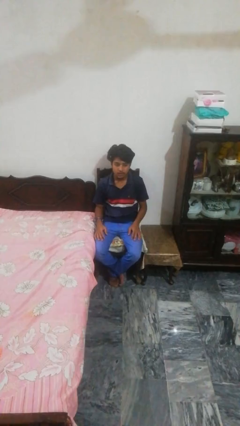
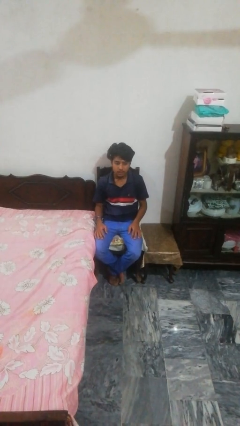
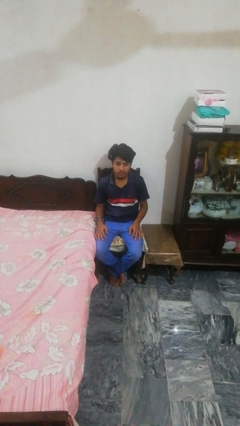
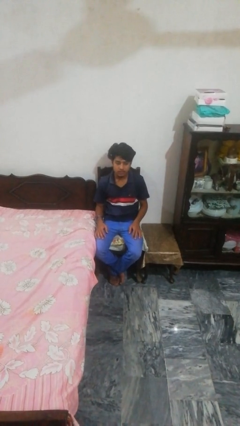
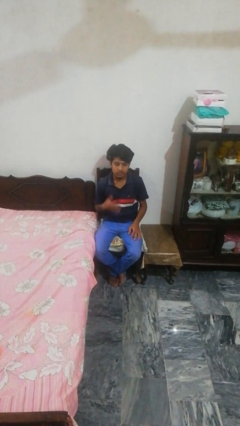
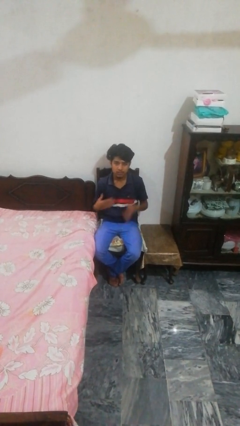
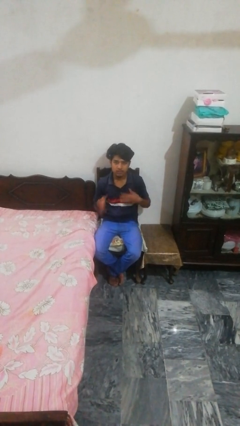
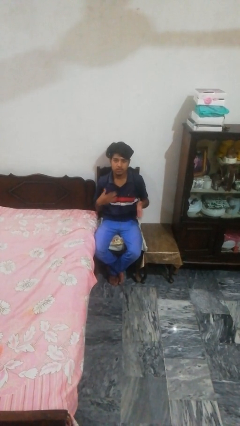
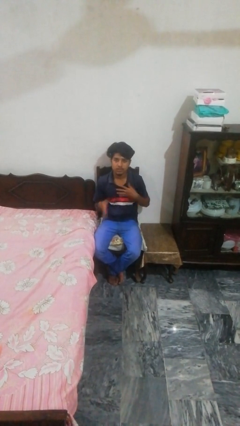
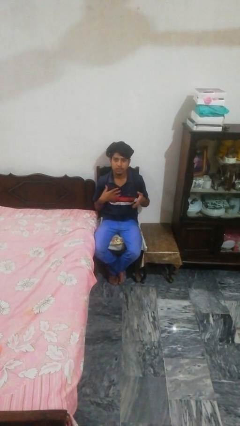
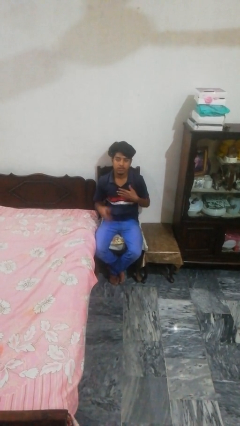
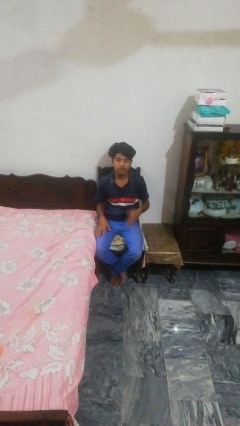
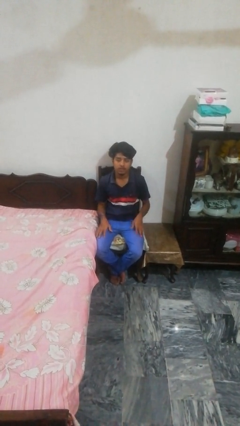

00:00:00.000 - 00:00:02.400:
person drums on chest

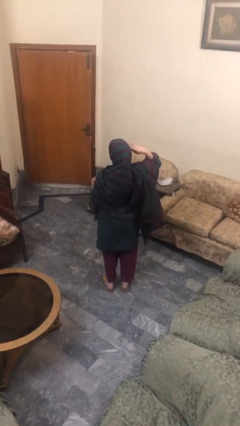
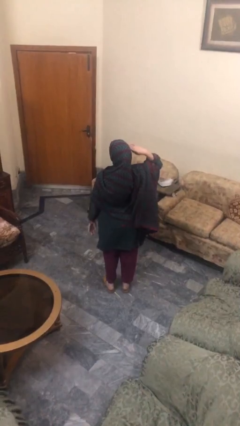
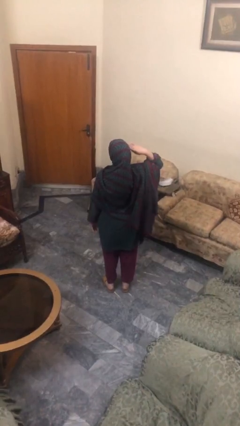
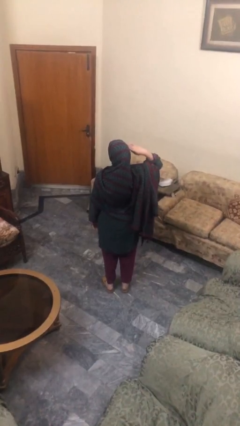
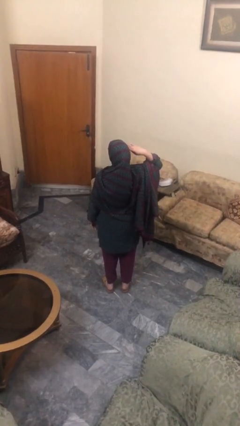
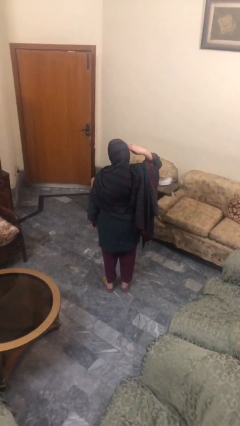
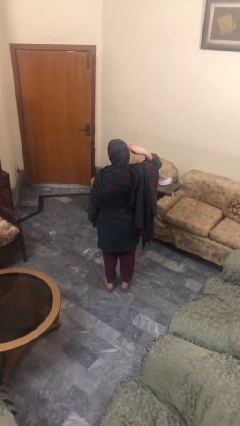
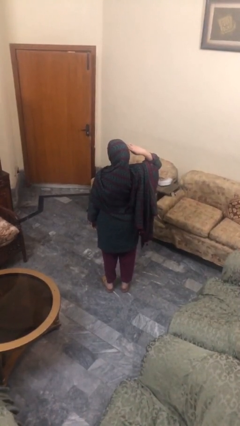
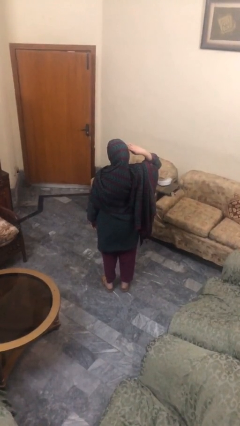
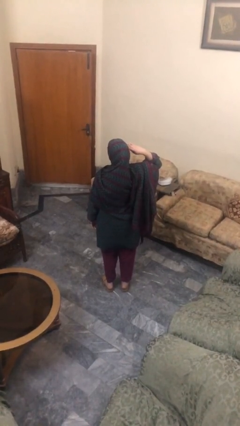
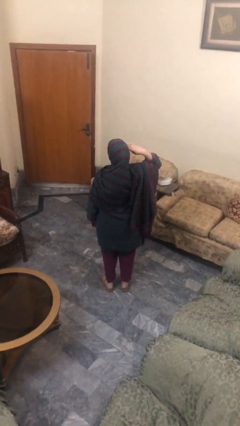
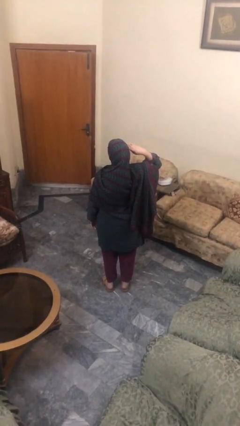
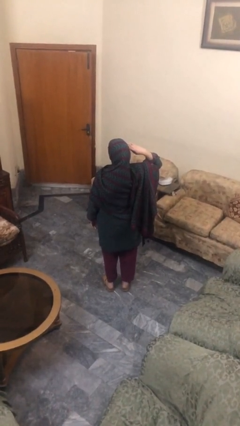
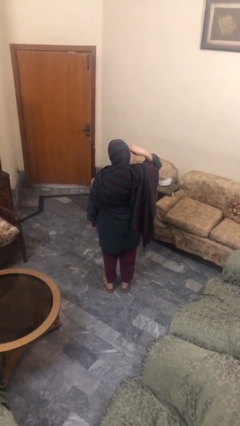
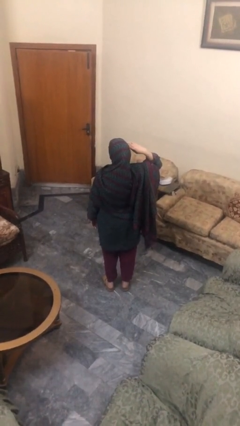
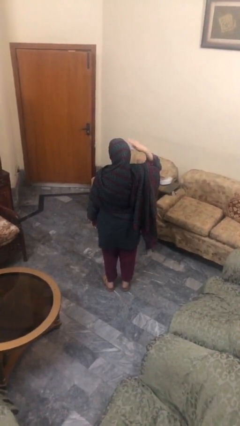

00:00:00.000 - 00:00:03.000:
person salutes

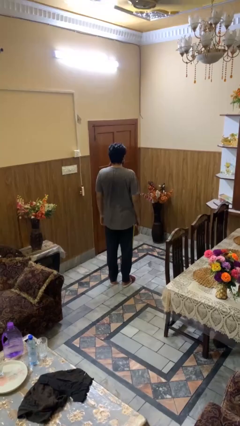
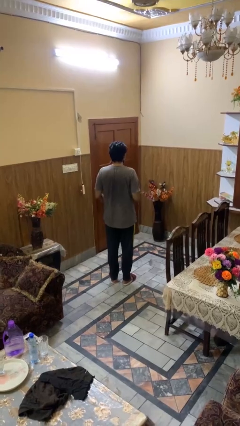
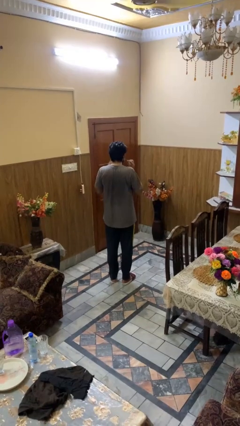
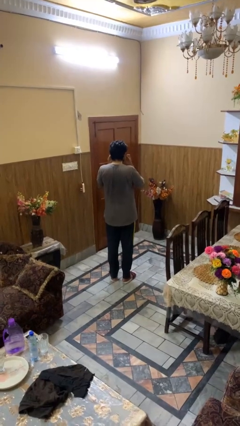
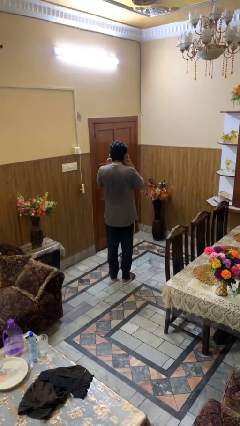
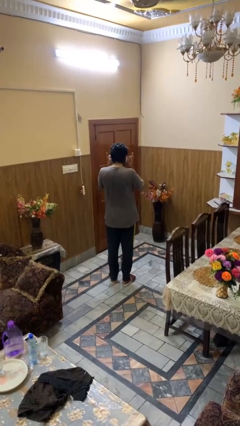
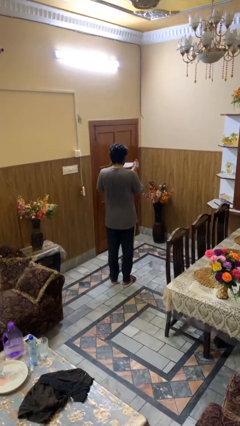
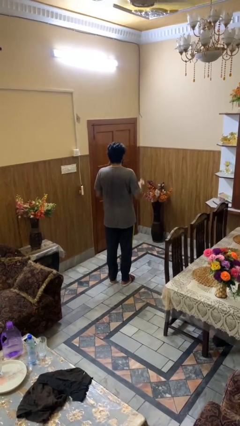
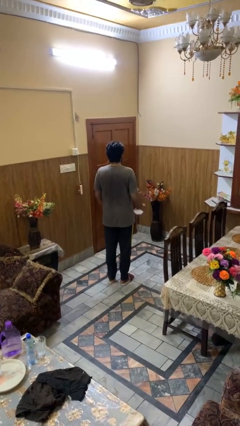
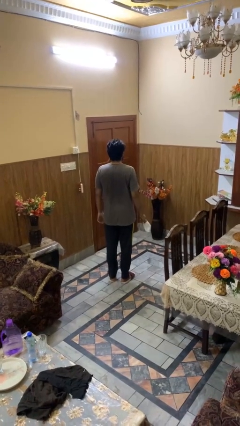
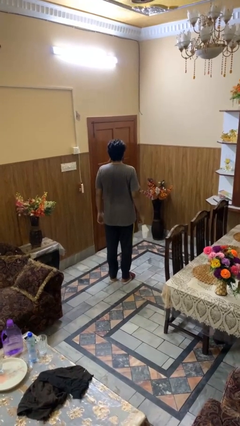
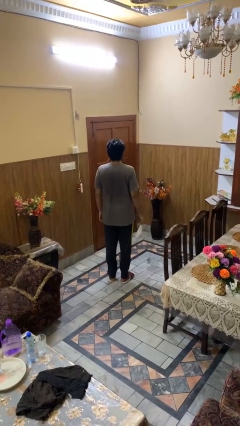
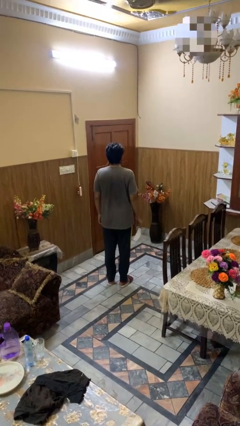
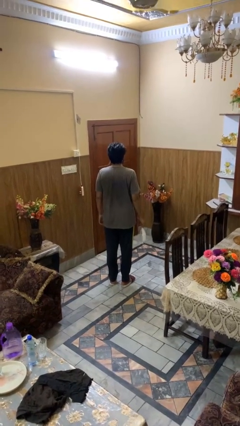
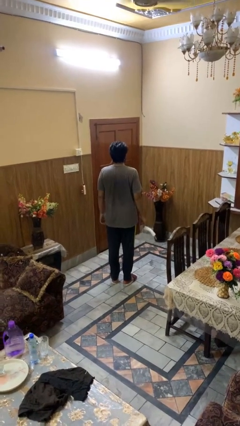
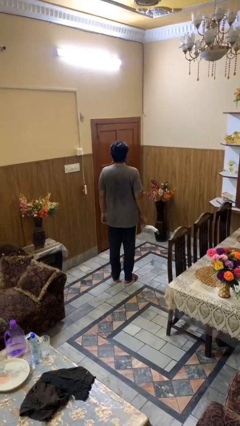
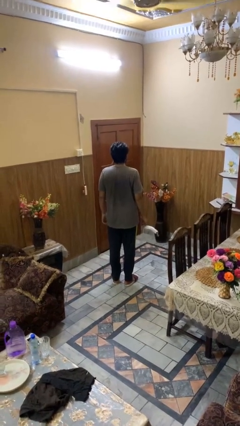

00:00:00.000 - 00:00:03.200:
person takes off facemask

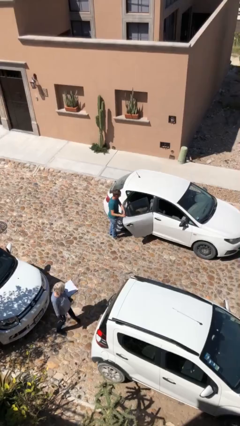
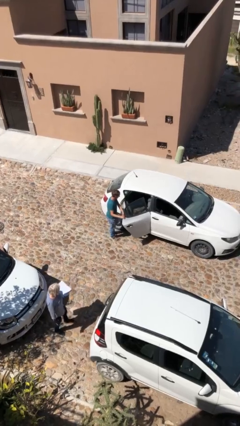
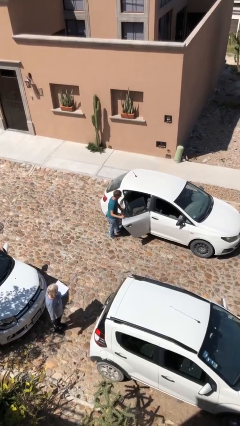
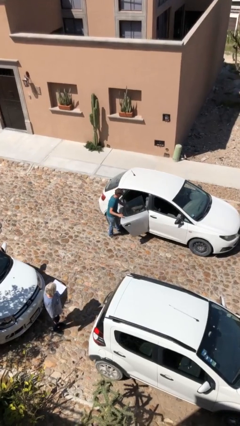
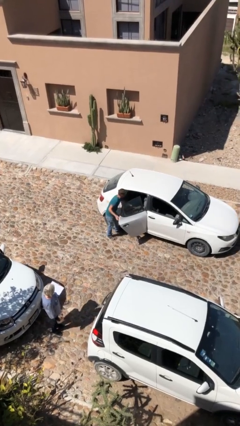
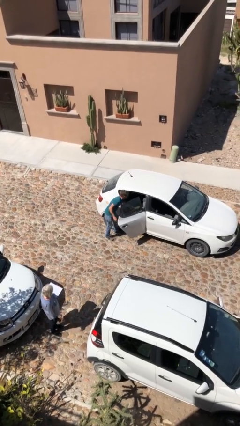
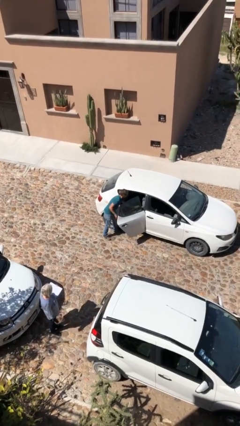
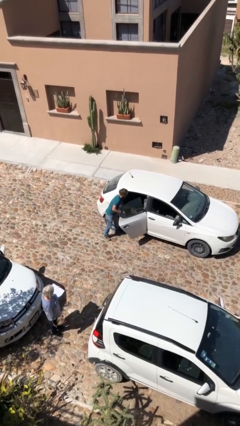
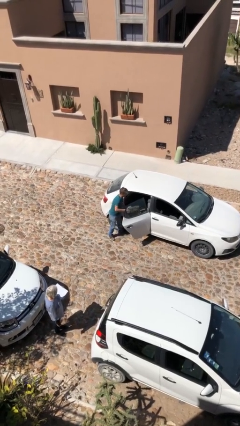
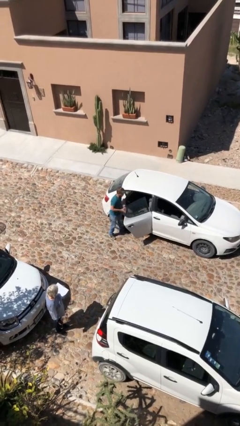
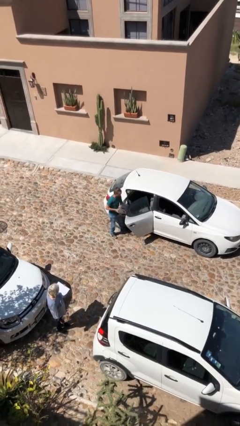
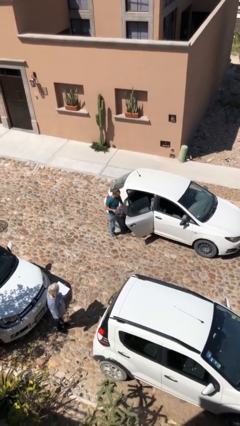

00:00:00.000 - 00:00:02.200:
person unloads car

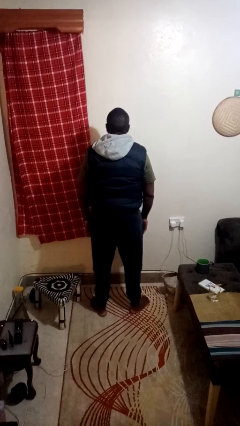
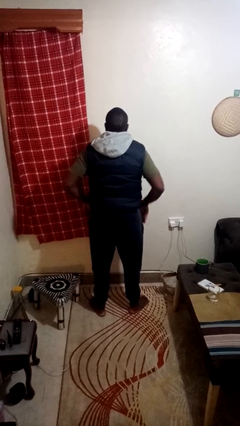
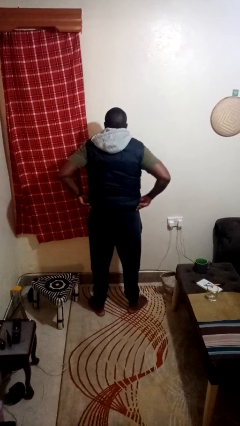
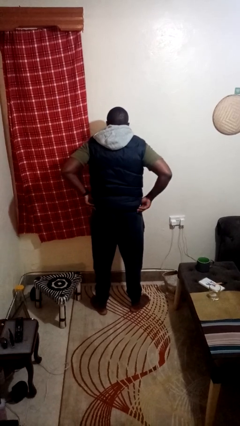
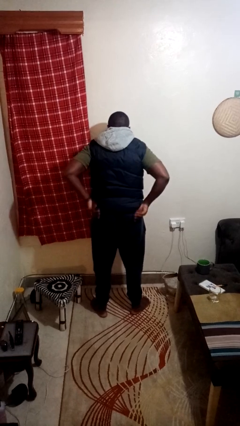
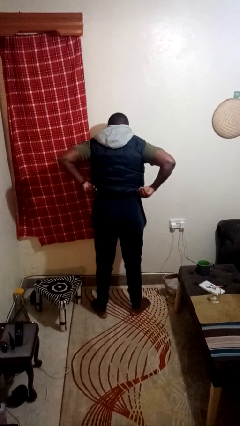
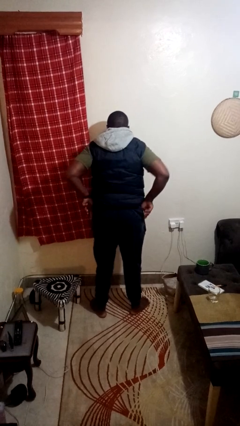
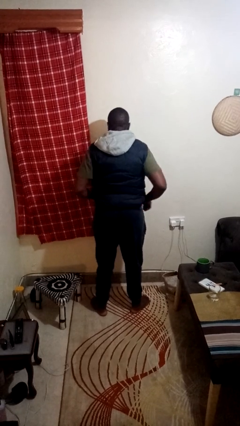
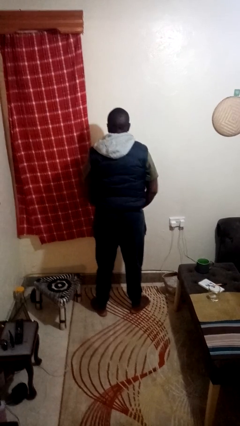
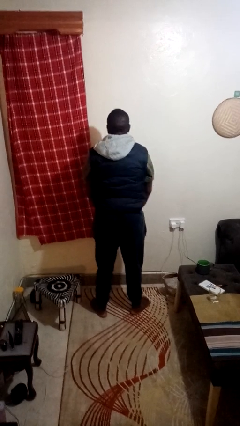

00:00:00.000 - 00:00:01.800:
person hikes up pants

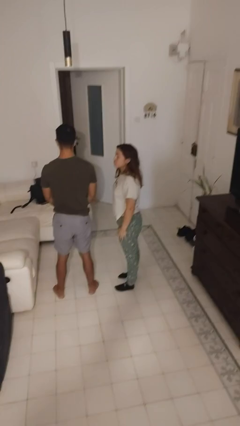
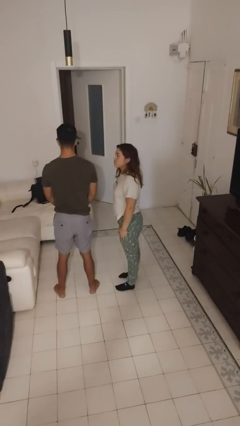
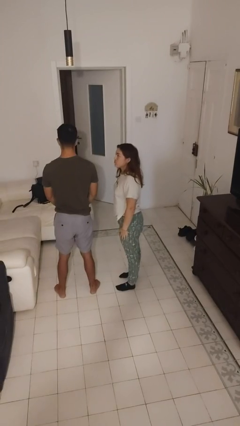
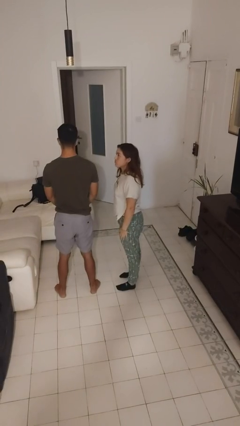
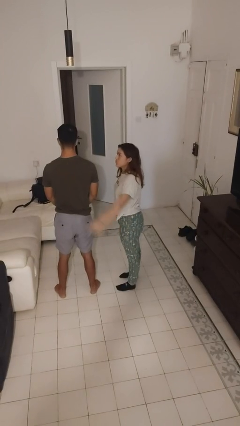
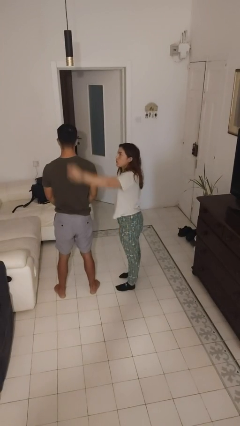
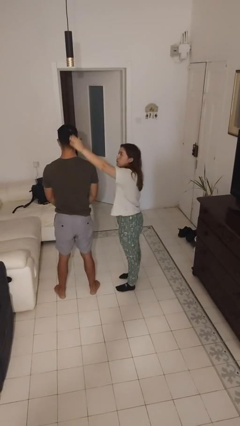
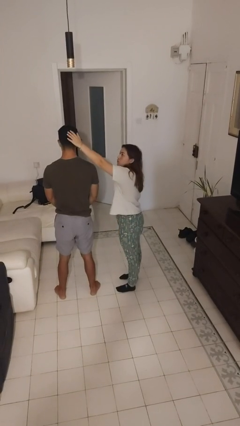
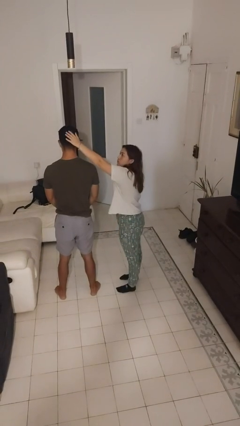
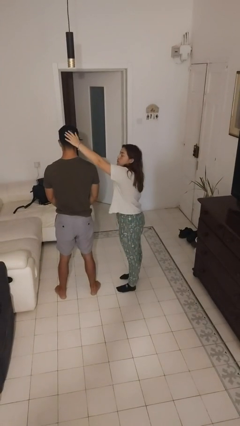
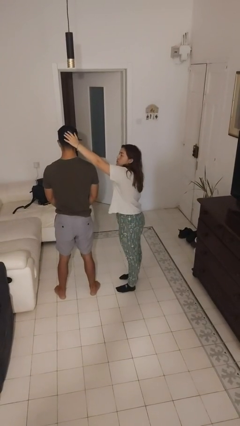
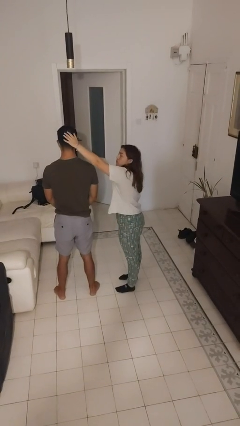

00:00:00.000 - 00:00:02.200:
person grabs person by hair

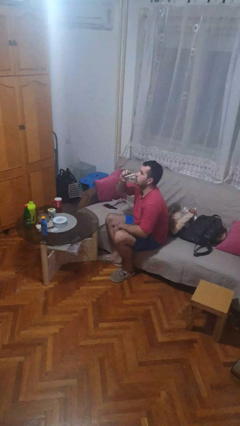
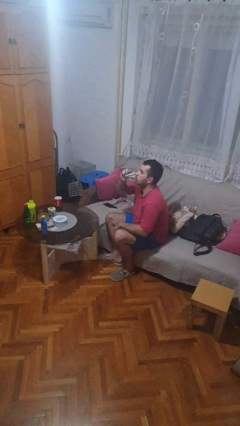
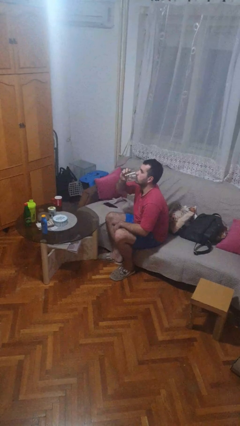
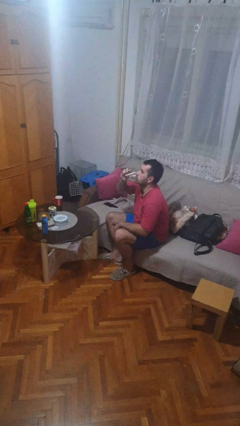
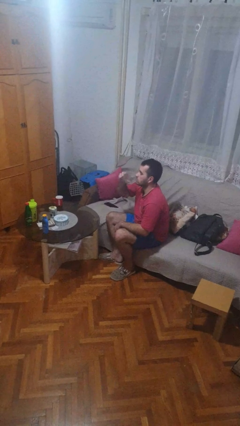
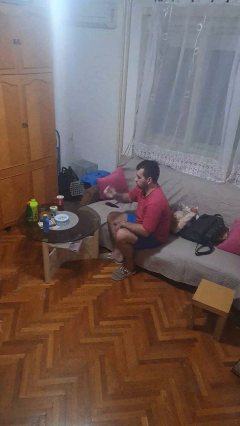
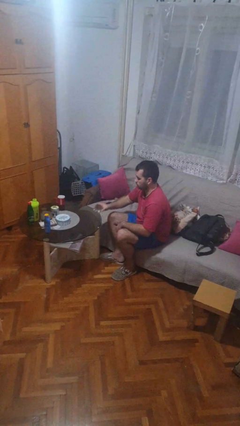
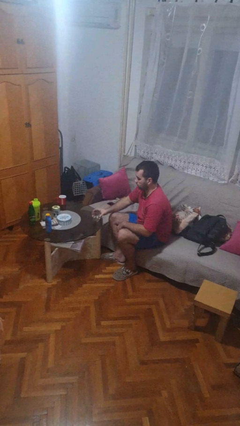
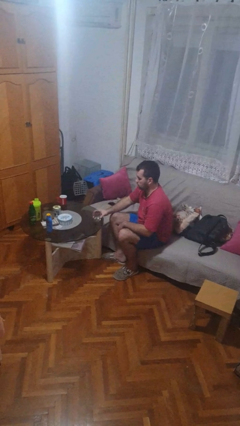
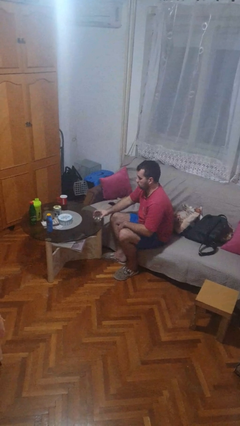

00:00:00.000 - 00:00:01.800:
person puts down object on table

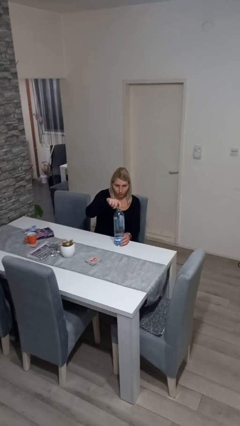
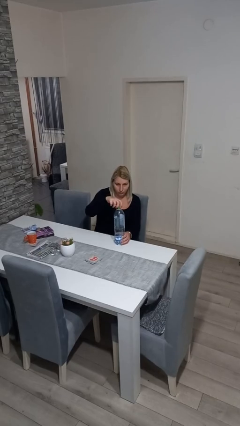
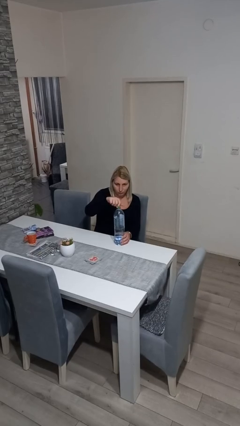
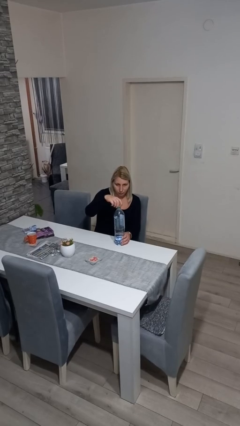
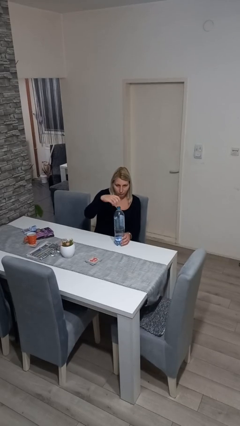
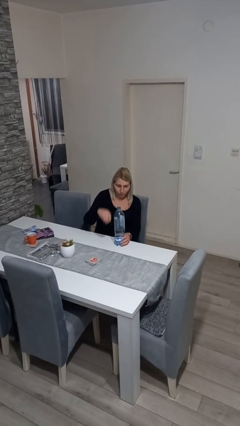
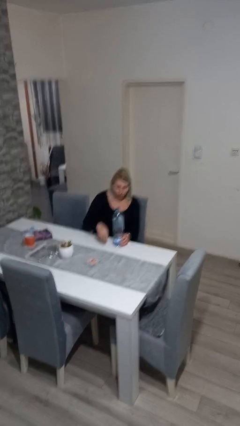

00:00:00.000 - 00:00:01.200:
person unscrews lid from bottle
